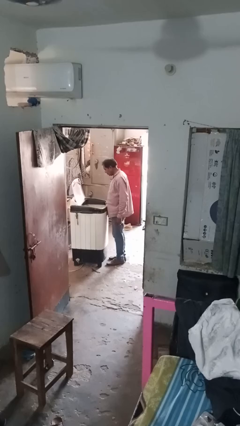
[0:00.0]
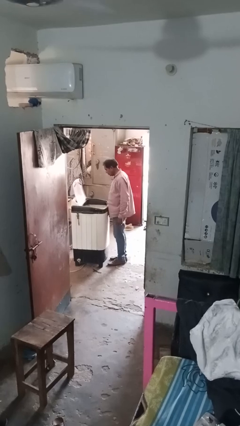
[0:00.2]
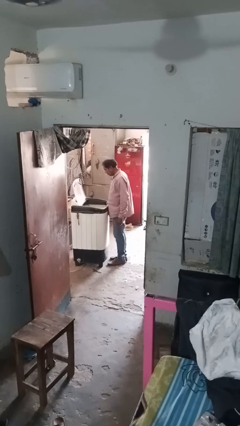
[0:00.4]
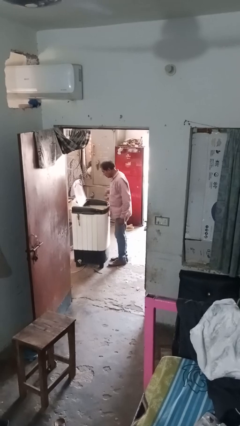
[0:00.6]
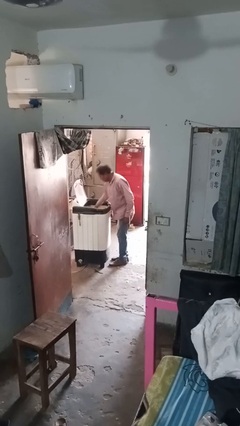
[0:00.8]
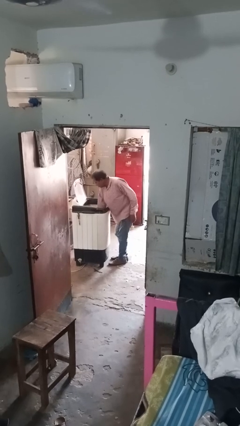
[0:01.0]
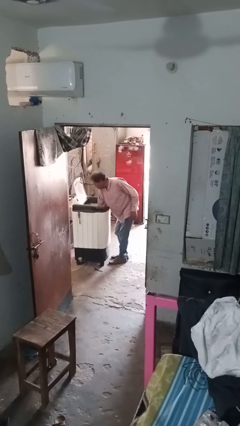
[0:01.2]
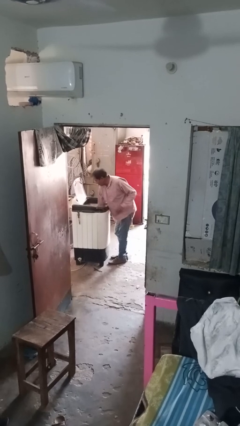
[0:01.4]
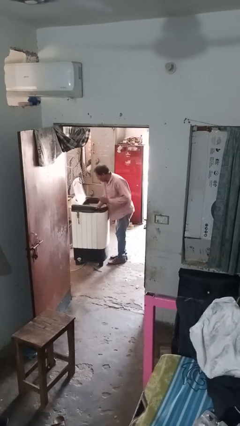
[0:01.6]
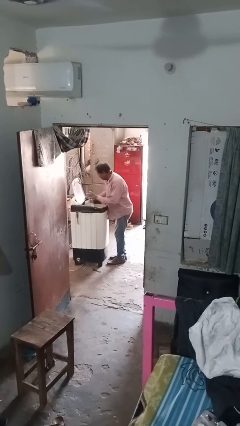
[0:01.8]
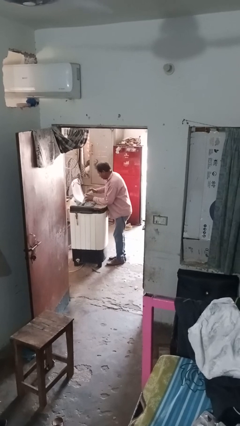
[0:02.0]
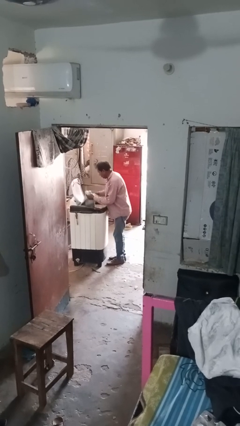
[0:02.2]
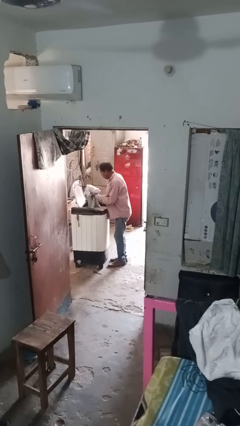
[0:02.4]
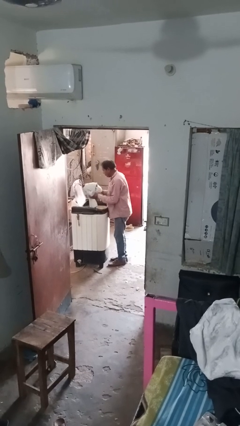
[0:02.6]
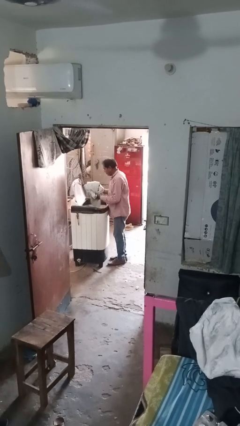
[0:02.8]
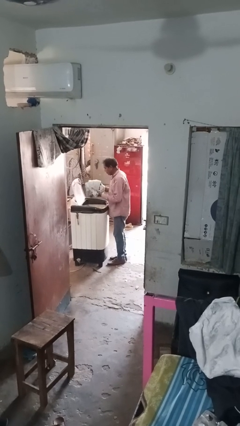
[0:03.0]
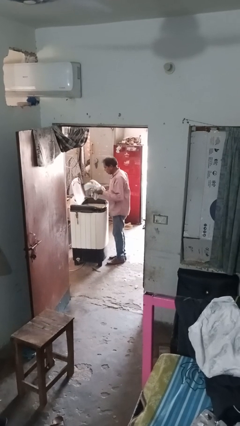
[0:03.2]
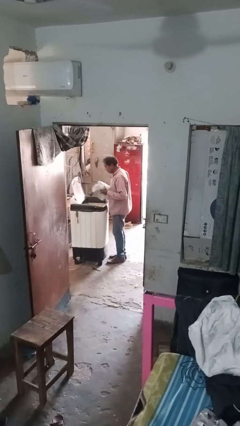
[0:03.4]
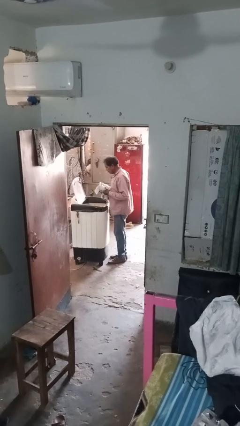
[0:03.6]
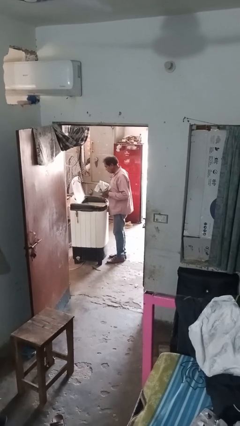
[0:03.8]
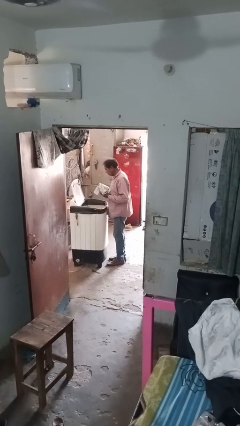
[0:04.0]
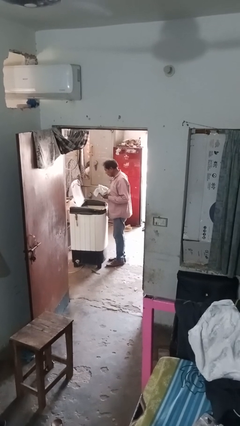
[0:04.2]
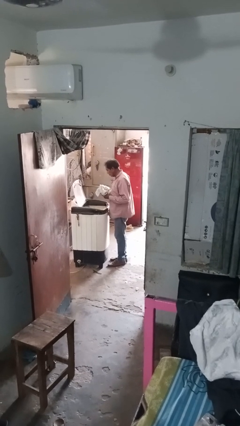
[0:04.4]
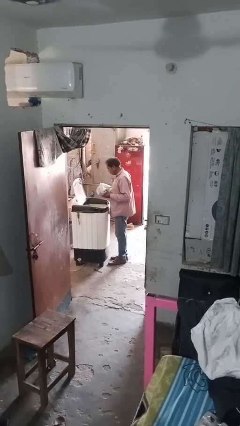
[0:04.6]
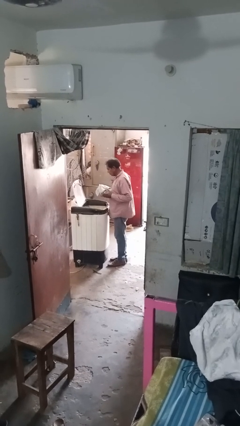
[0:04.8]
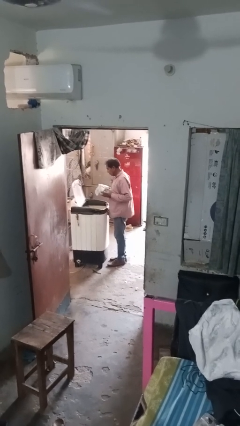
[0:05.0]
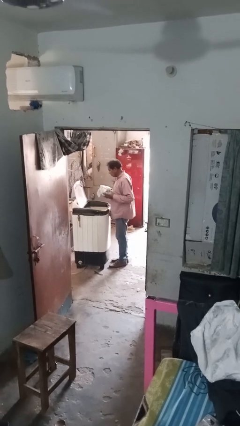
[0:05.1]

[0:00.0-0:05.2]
person unloads clotheswasher

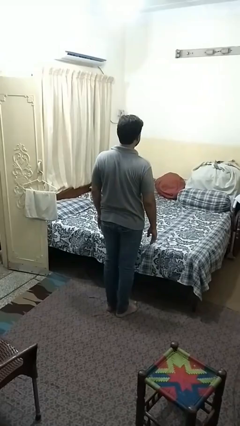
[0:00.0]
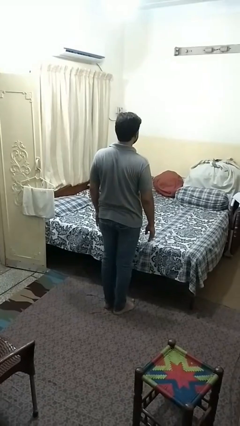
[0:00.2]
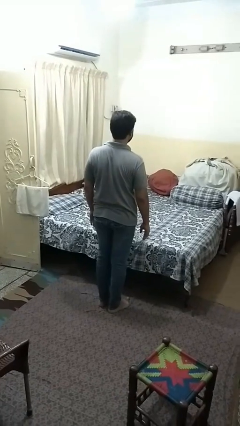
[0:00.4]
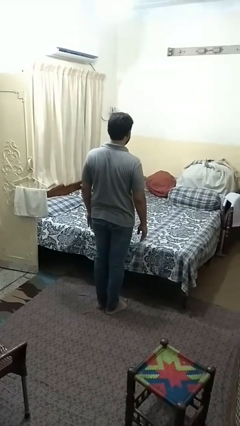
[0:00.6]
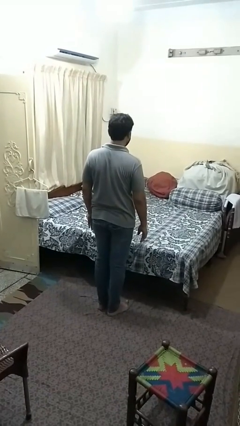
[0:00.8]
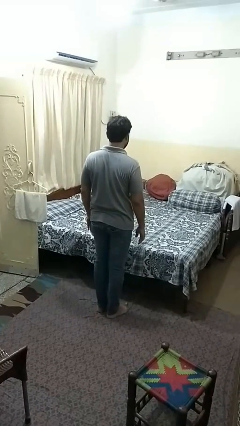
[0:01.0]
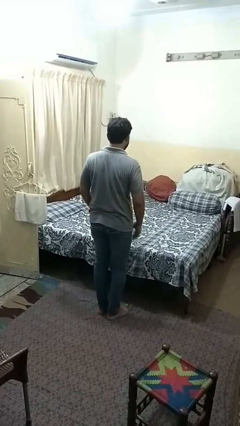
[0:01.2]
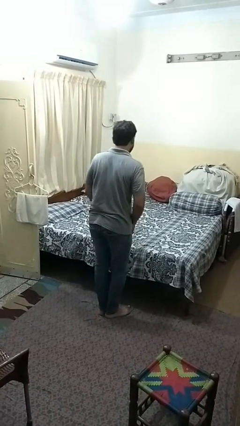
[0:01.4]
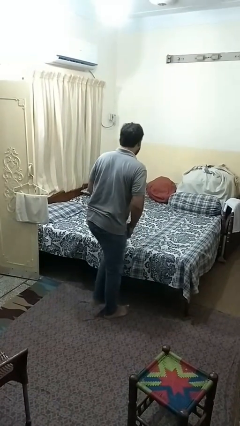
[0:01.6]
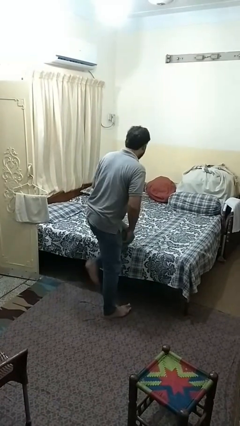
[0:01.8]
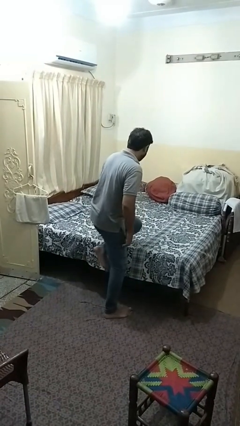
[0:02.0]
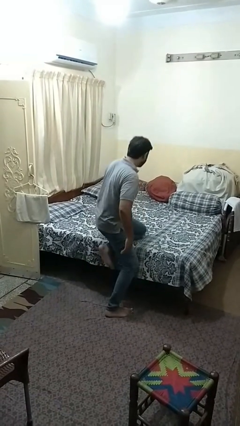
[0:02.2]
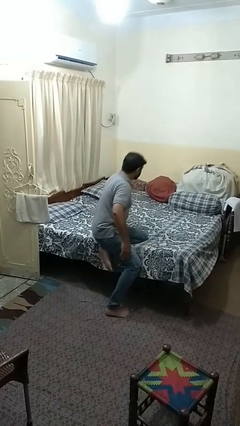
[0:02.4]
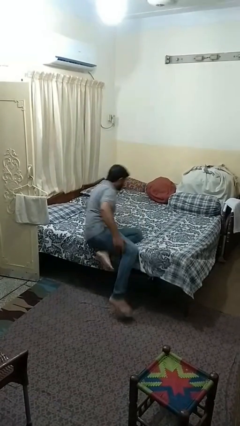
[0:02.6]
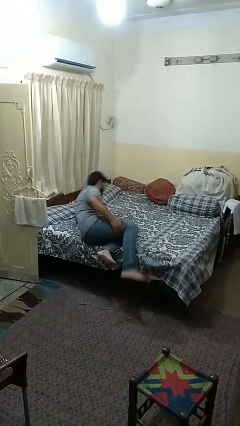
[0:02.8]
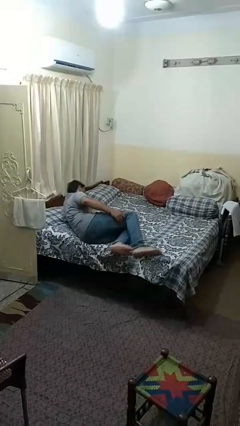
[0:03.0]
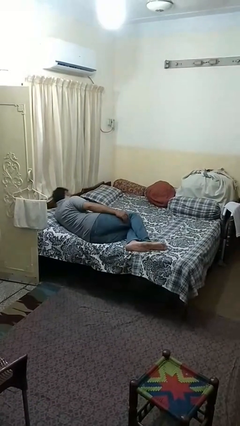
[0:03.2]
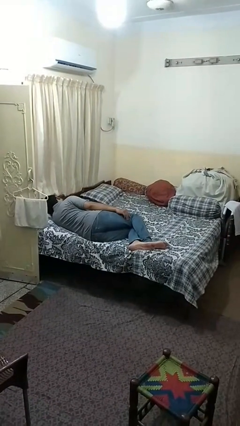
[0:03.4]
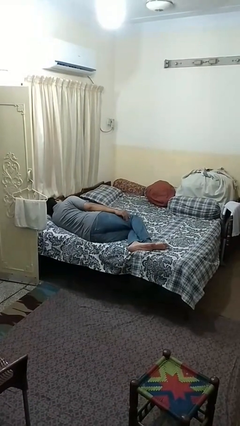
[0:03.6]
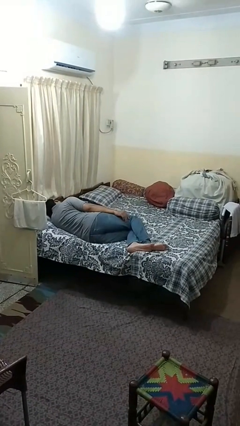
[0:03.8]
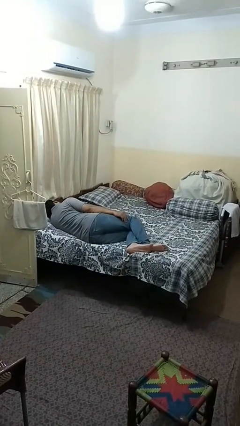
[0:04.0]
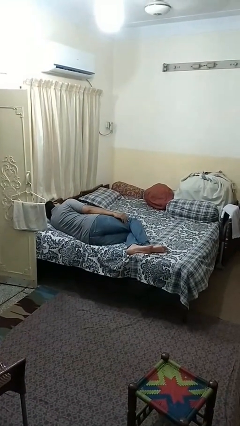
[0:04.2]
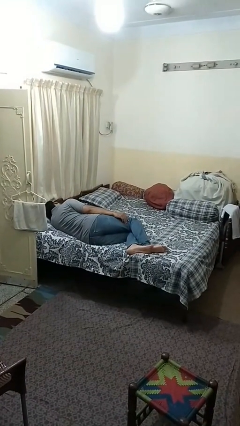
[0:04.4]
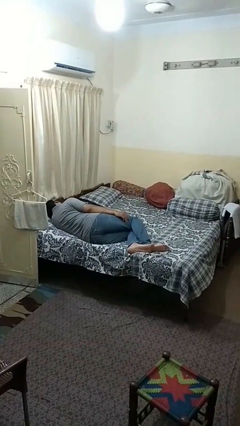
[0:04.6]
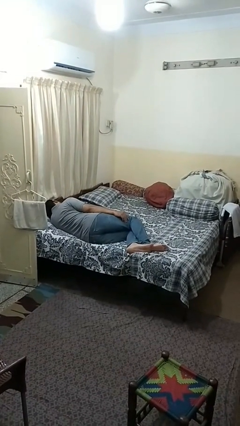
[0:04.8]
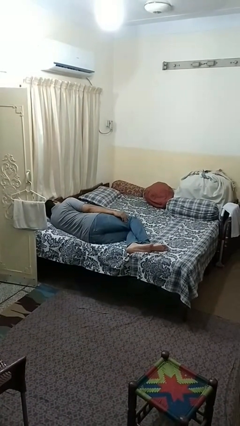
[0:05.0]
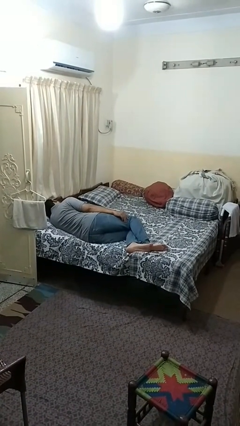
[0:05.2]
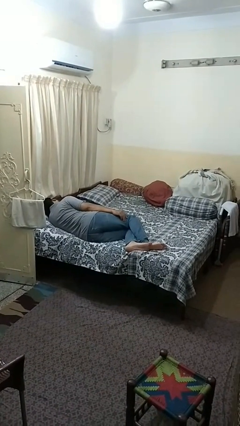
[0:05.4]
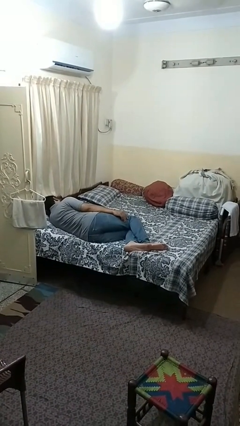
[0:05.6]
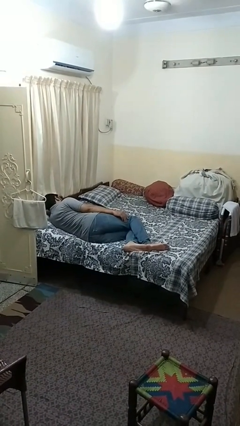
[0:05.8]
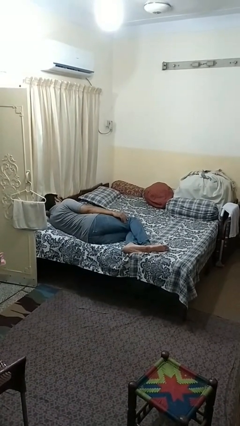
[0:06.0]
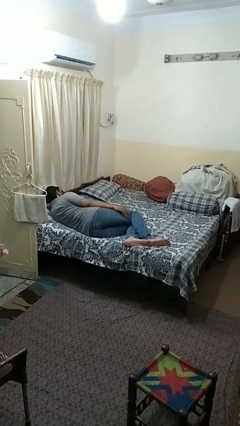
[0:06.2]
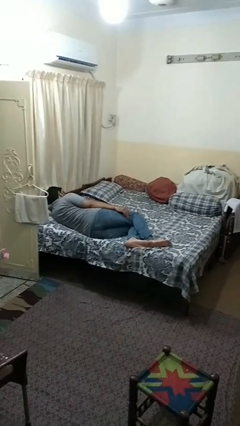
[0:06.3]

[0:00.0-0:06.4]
person lies down on bed

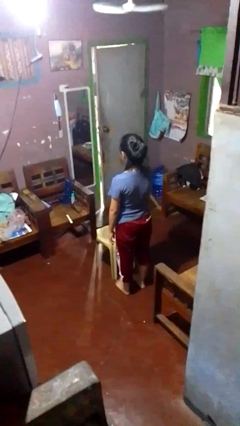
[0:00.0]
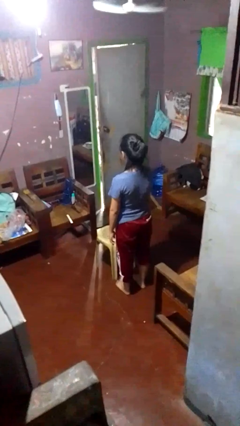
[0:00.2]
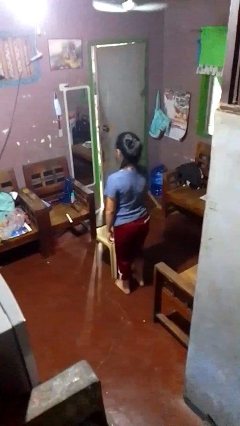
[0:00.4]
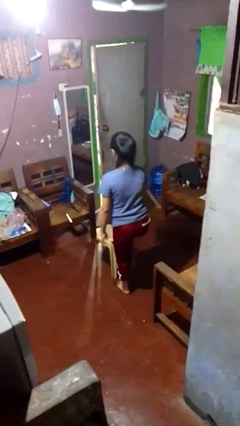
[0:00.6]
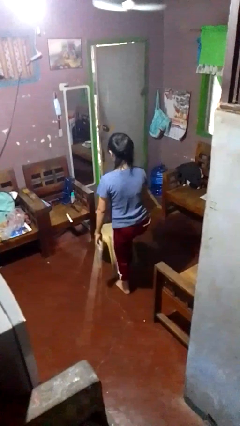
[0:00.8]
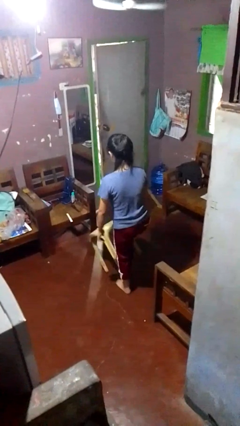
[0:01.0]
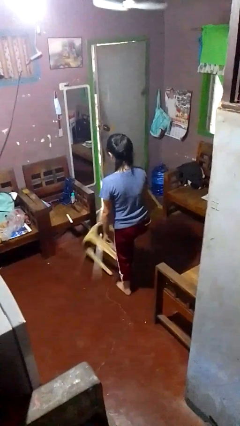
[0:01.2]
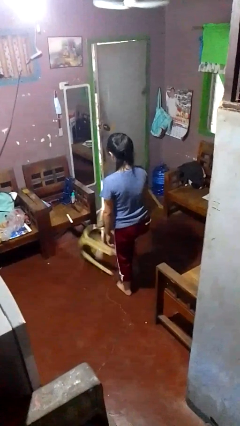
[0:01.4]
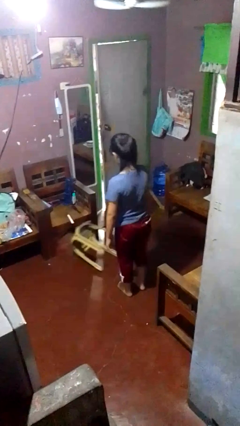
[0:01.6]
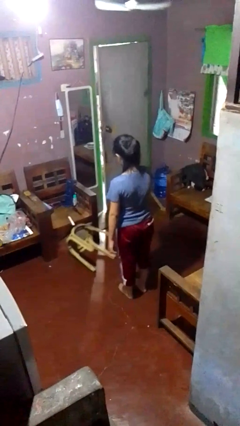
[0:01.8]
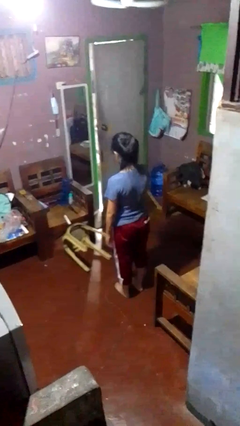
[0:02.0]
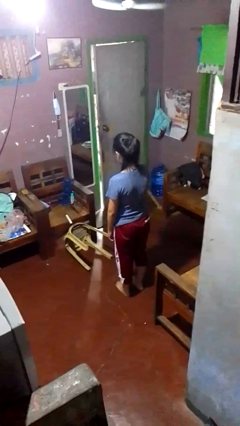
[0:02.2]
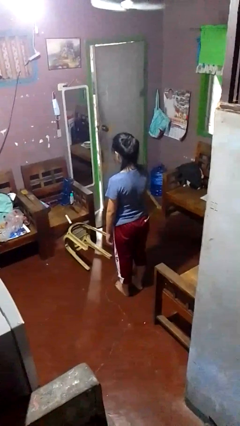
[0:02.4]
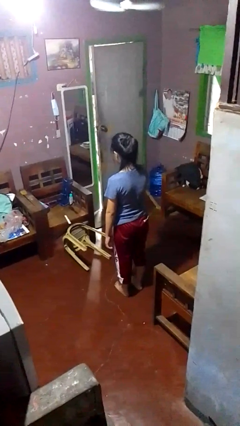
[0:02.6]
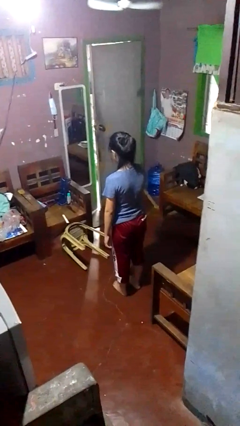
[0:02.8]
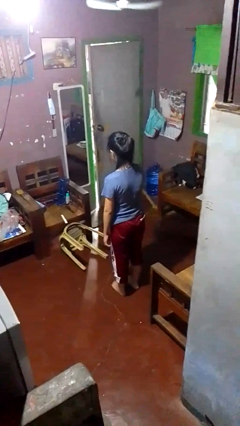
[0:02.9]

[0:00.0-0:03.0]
person knocks over furniture

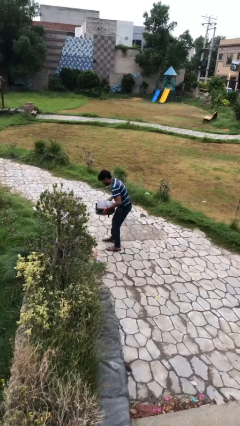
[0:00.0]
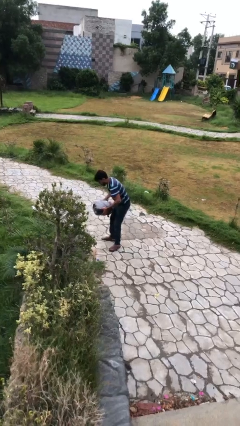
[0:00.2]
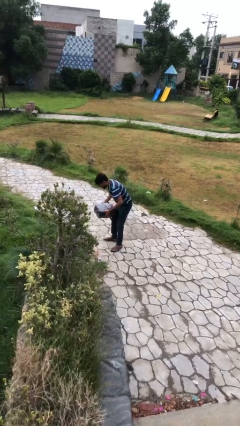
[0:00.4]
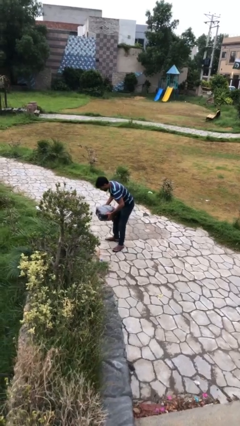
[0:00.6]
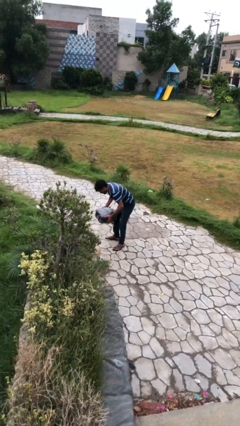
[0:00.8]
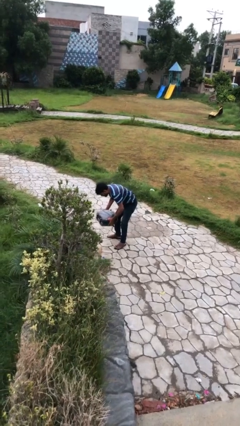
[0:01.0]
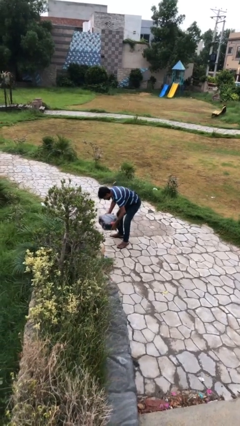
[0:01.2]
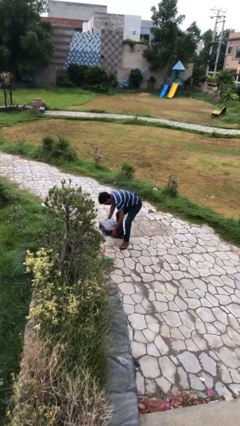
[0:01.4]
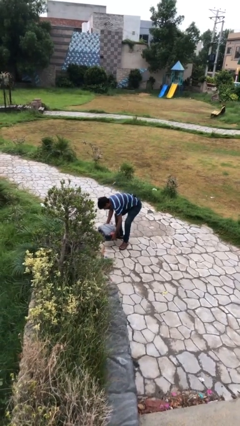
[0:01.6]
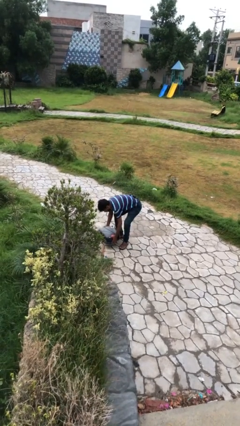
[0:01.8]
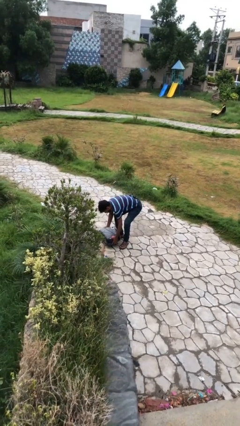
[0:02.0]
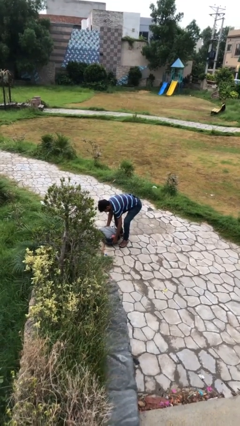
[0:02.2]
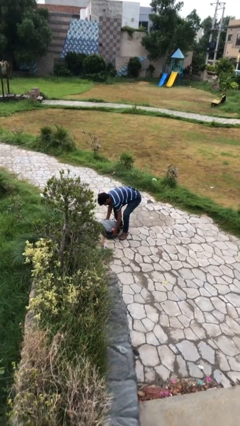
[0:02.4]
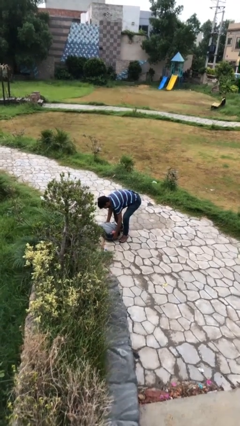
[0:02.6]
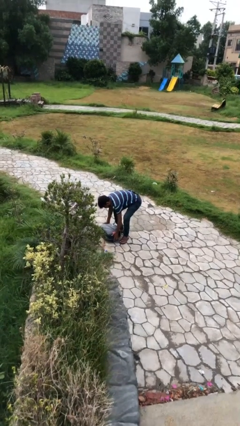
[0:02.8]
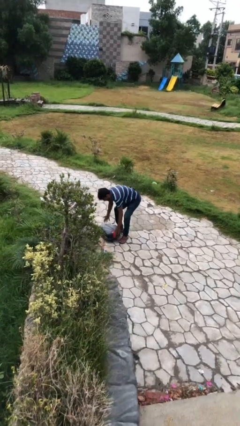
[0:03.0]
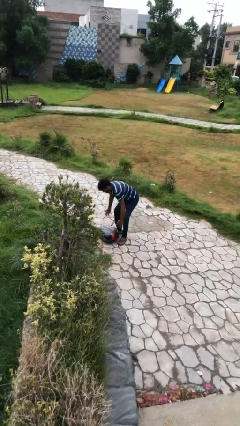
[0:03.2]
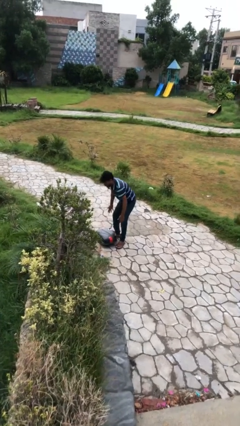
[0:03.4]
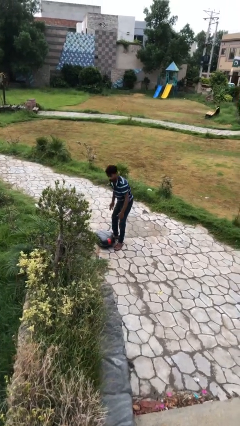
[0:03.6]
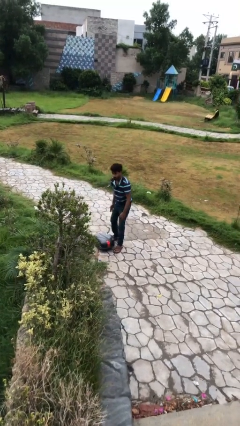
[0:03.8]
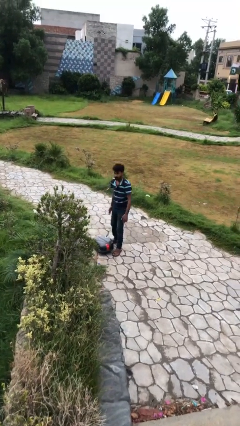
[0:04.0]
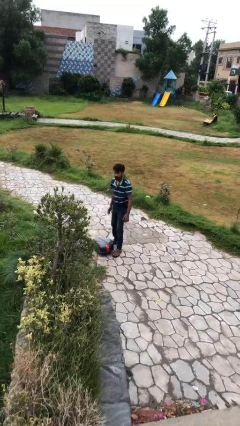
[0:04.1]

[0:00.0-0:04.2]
person puts down object on floor
